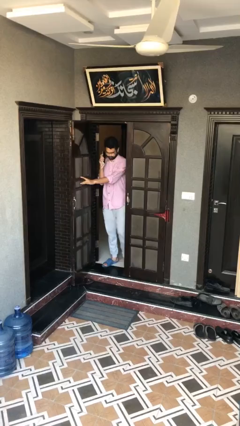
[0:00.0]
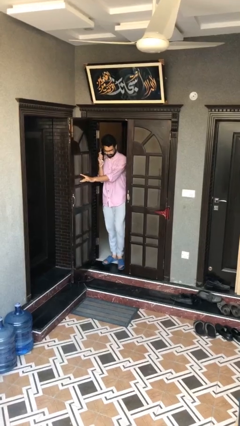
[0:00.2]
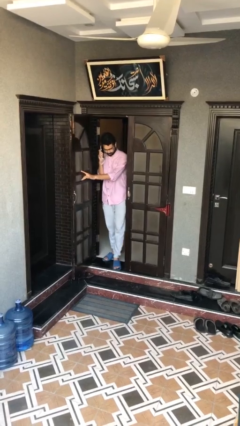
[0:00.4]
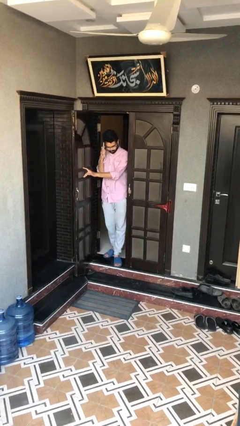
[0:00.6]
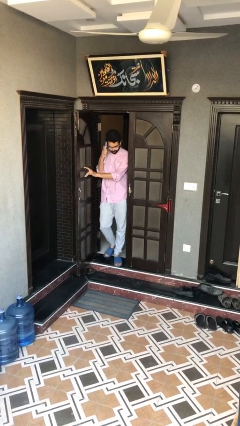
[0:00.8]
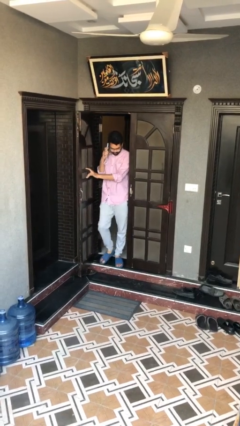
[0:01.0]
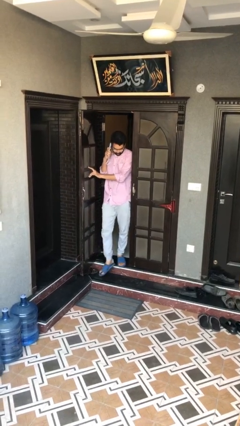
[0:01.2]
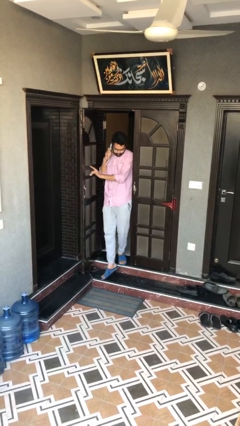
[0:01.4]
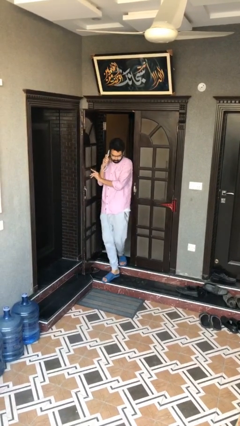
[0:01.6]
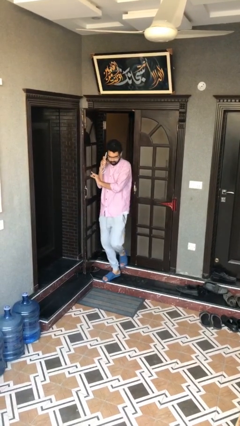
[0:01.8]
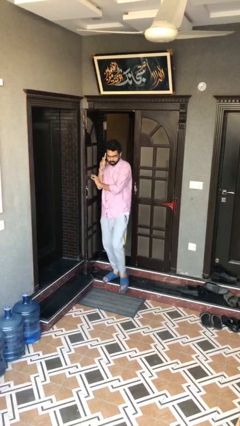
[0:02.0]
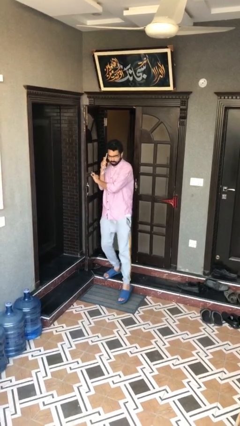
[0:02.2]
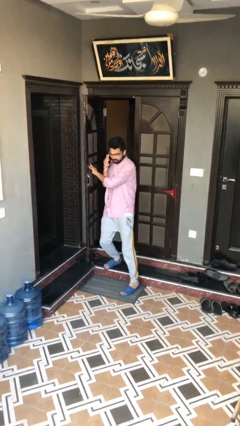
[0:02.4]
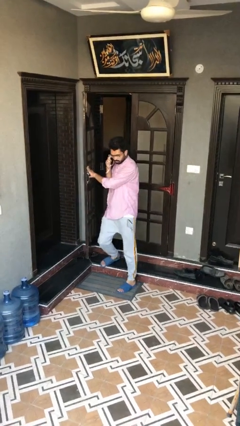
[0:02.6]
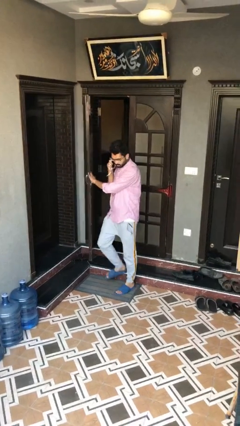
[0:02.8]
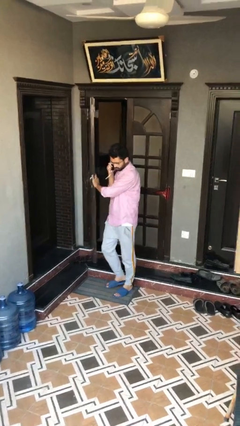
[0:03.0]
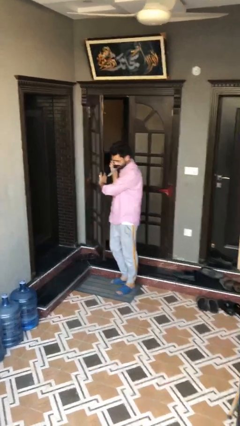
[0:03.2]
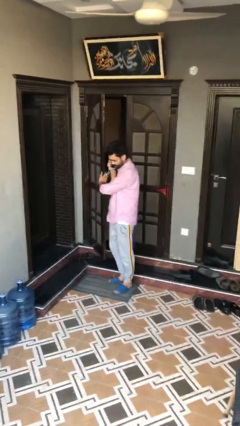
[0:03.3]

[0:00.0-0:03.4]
person enters scene through structure

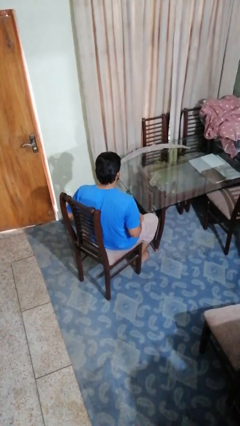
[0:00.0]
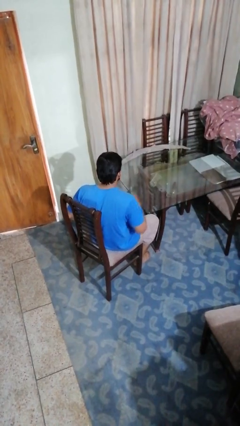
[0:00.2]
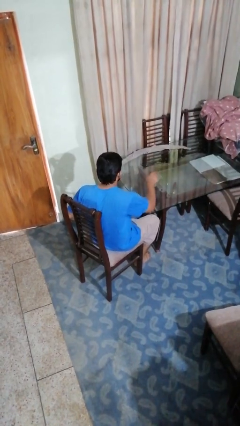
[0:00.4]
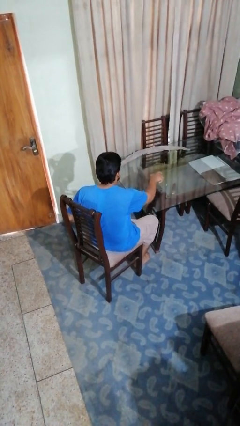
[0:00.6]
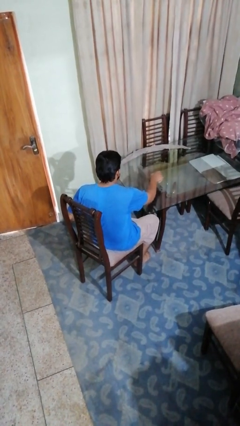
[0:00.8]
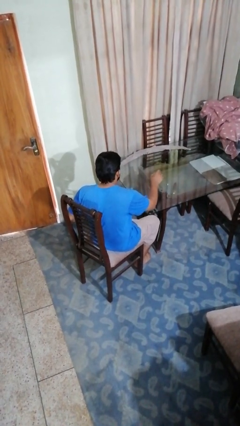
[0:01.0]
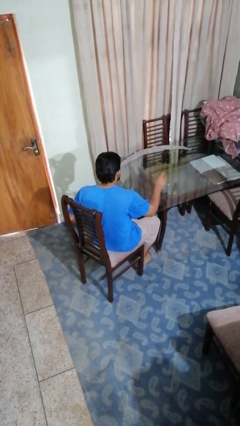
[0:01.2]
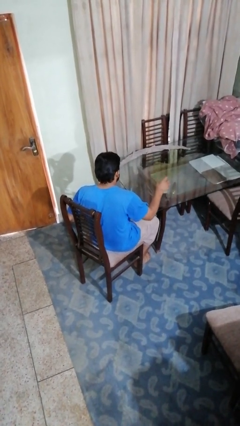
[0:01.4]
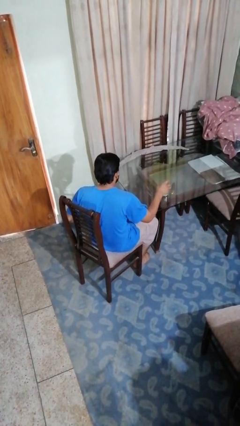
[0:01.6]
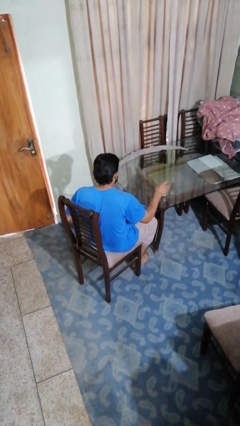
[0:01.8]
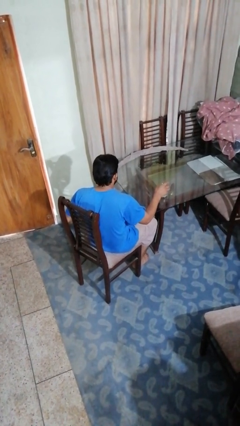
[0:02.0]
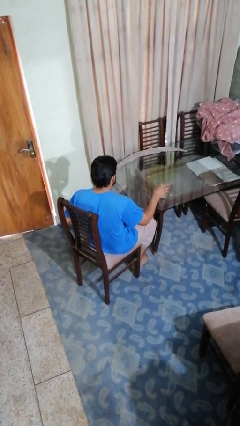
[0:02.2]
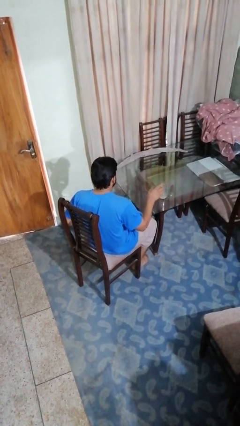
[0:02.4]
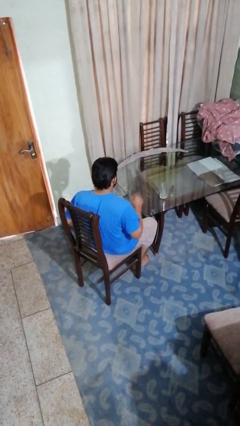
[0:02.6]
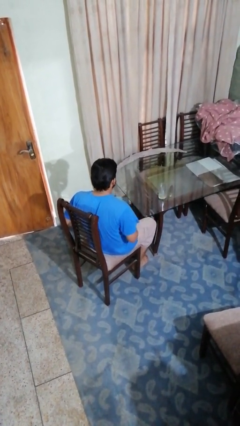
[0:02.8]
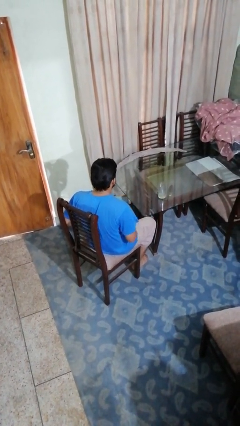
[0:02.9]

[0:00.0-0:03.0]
person sets upright glass

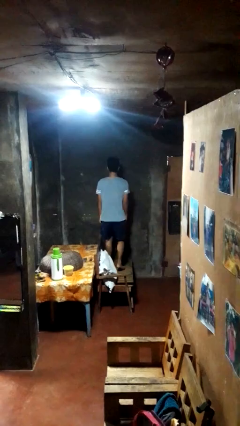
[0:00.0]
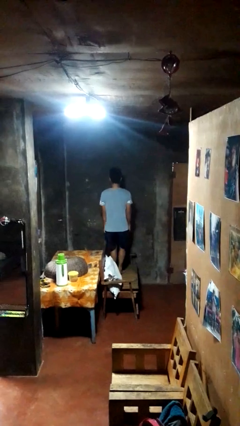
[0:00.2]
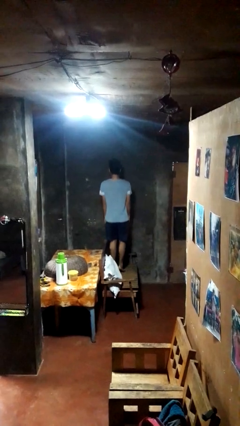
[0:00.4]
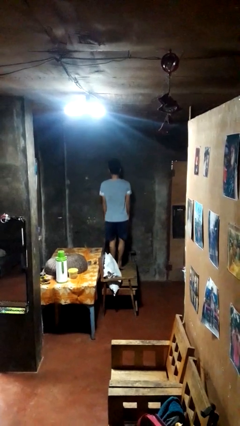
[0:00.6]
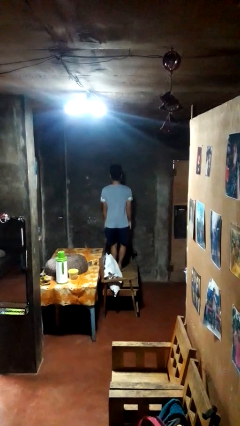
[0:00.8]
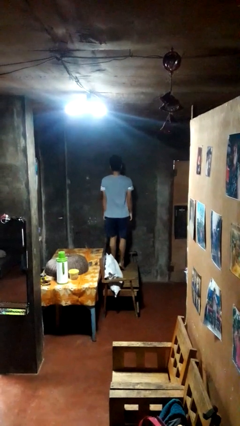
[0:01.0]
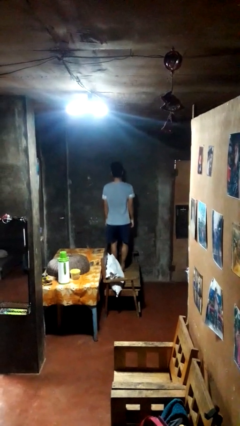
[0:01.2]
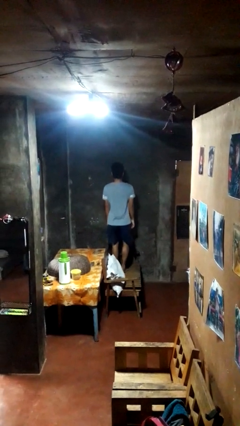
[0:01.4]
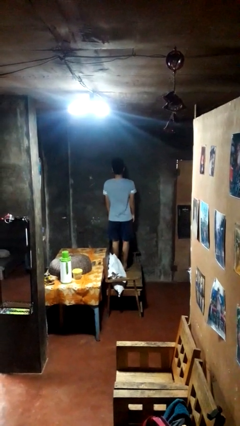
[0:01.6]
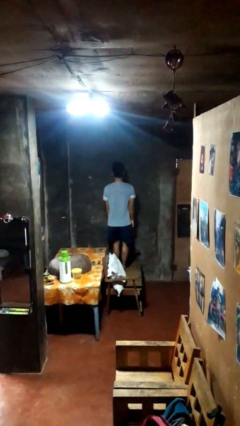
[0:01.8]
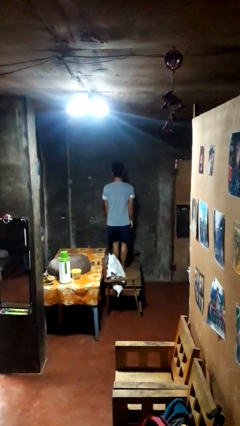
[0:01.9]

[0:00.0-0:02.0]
person jumps on couch

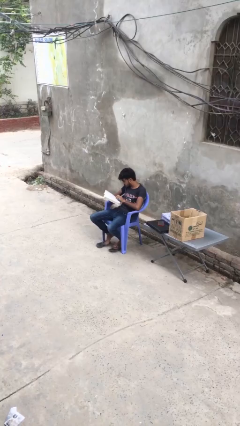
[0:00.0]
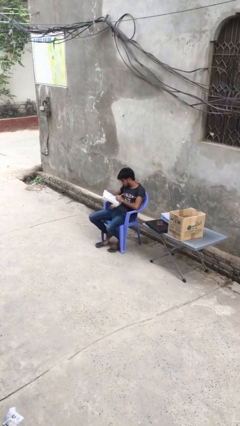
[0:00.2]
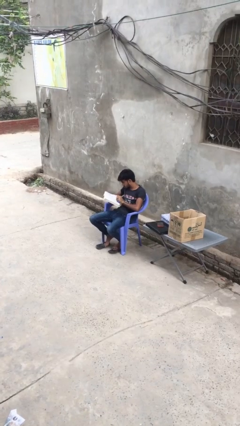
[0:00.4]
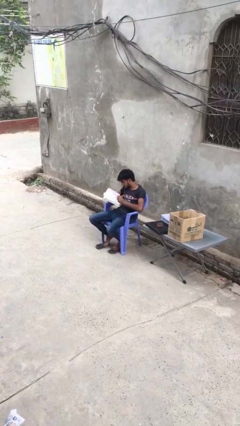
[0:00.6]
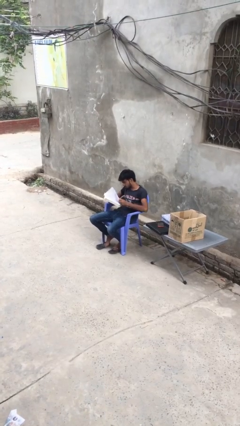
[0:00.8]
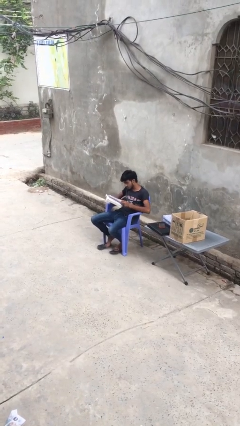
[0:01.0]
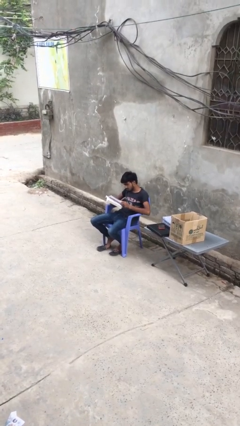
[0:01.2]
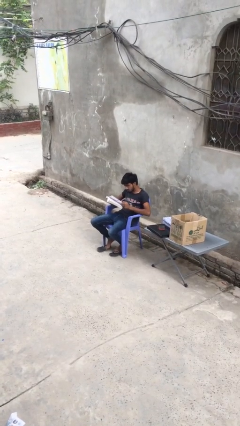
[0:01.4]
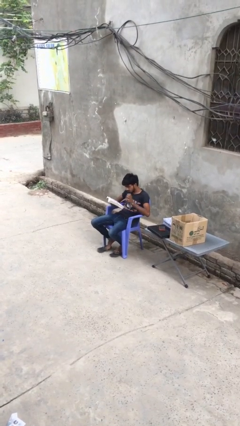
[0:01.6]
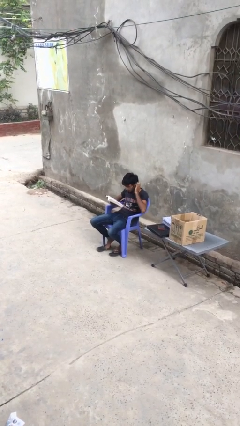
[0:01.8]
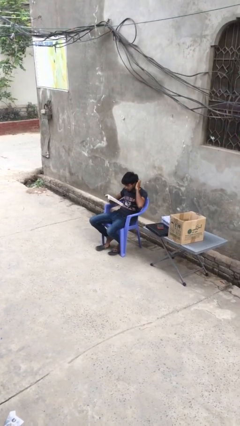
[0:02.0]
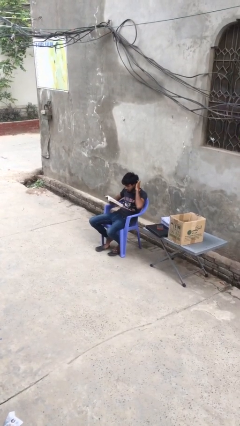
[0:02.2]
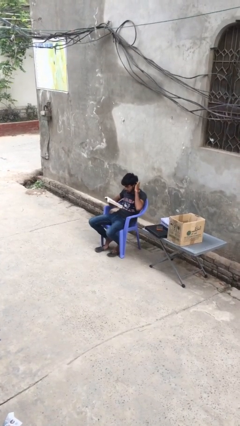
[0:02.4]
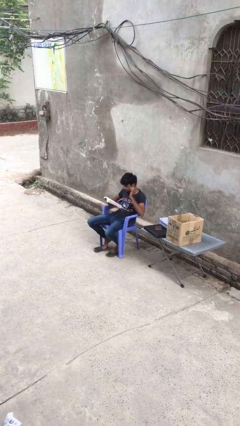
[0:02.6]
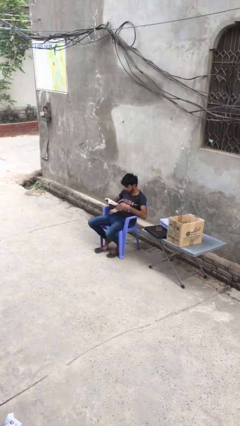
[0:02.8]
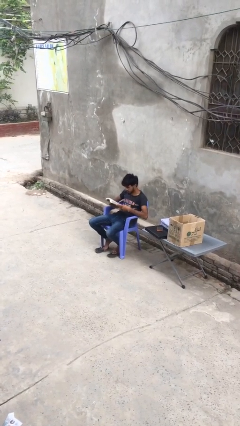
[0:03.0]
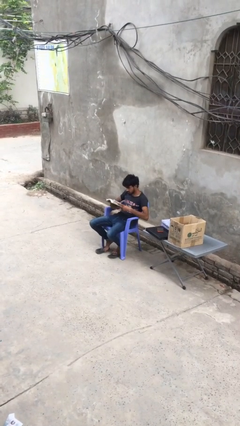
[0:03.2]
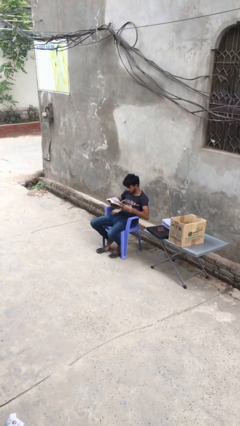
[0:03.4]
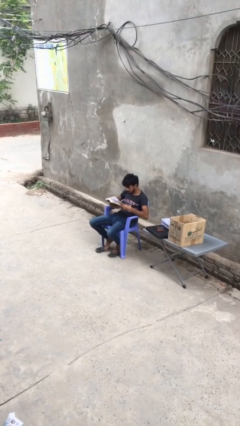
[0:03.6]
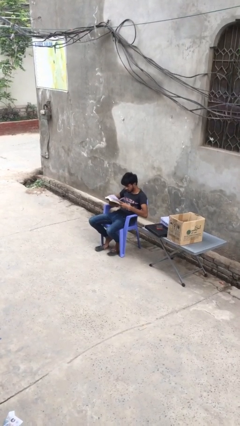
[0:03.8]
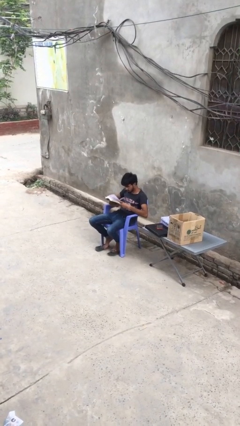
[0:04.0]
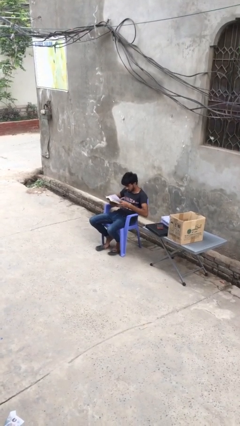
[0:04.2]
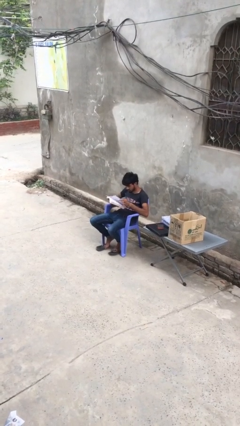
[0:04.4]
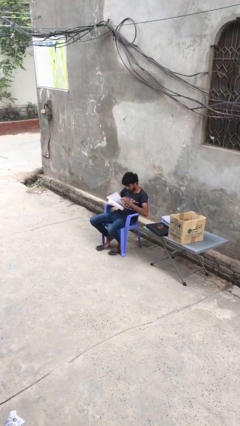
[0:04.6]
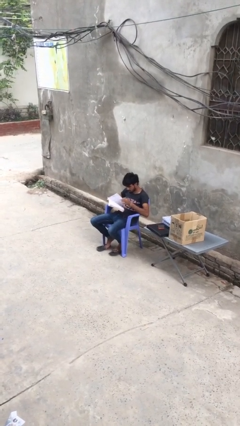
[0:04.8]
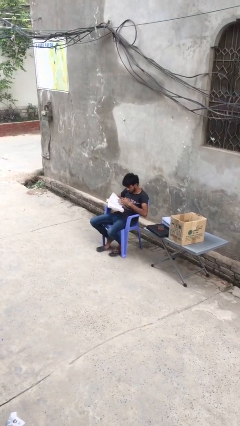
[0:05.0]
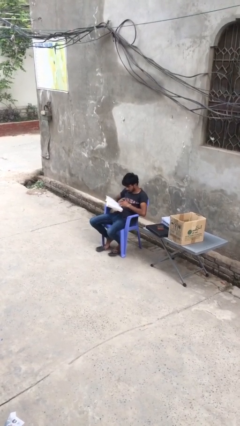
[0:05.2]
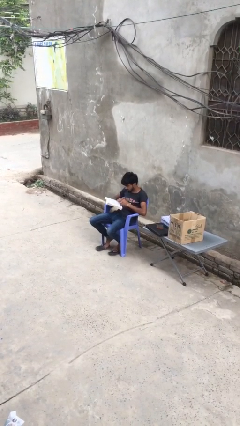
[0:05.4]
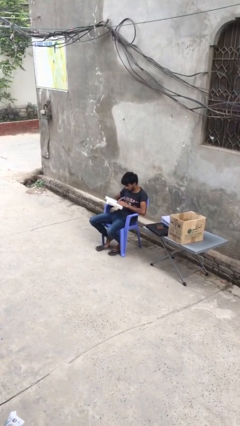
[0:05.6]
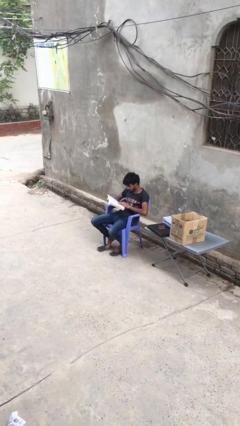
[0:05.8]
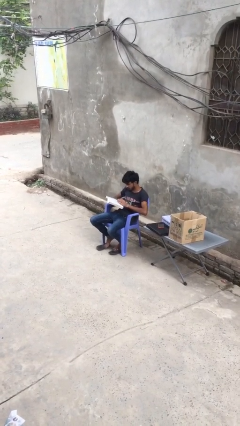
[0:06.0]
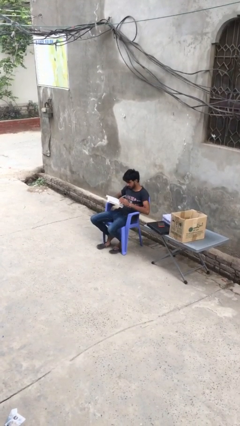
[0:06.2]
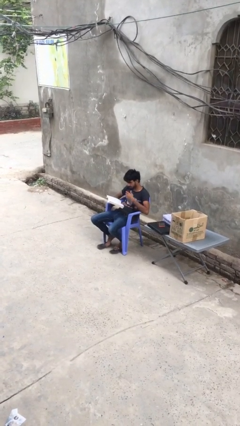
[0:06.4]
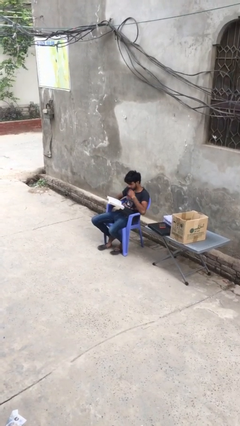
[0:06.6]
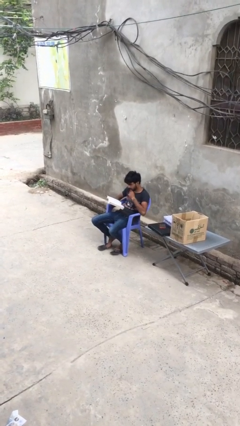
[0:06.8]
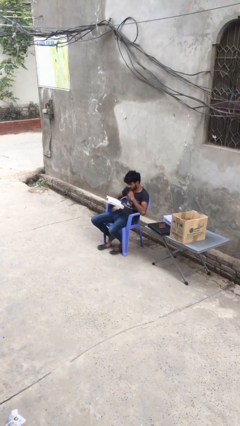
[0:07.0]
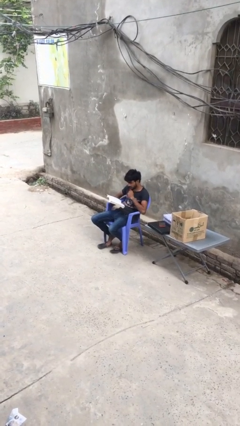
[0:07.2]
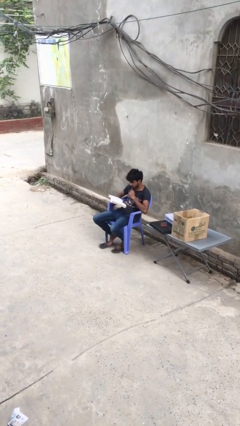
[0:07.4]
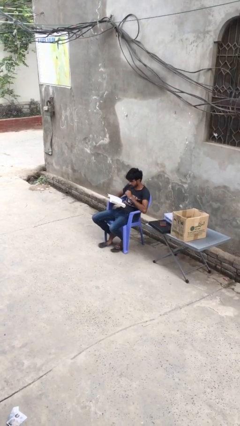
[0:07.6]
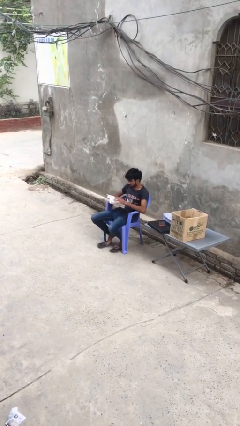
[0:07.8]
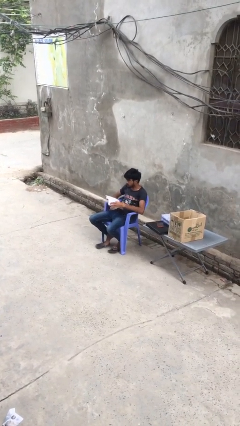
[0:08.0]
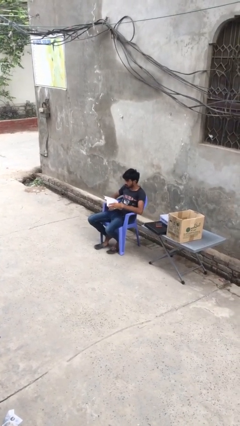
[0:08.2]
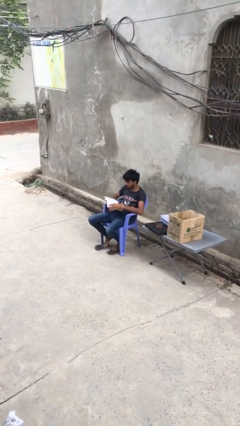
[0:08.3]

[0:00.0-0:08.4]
person reads document

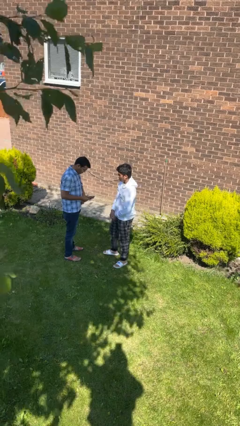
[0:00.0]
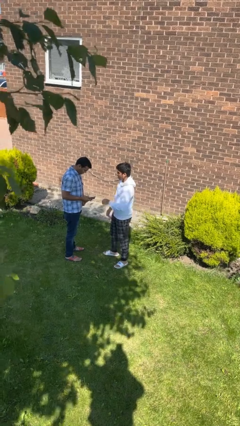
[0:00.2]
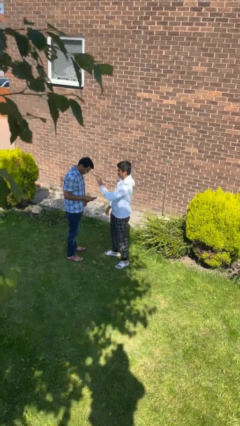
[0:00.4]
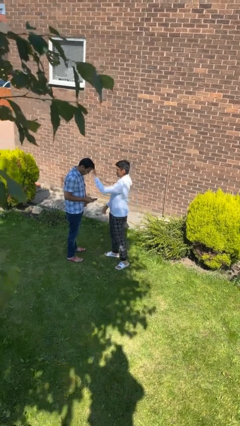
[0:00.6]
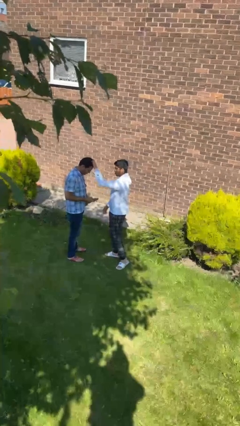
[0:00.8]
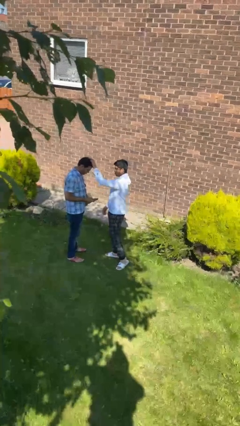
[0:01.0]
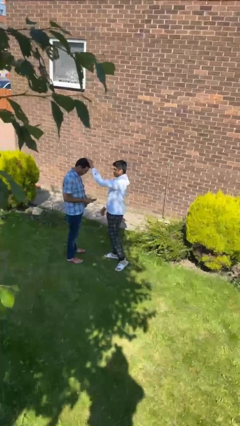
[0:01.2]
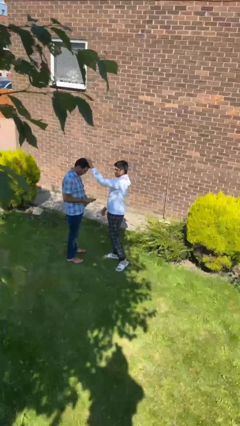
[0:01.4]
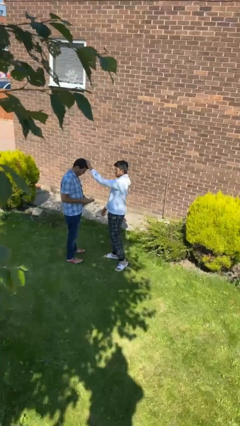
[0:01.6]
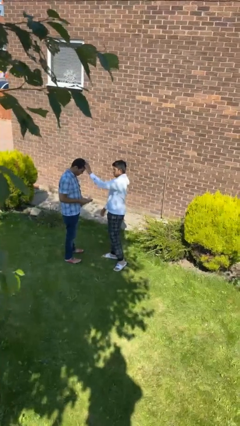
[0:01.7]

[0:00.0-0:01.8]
person grabs person by hair
